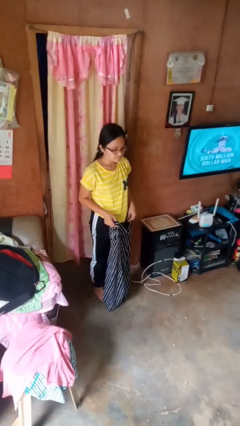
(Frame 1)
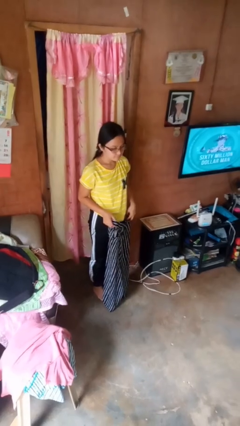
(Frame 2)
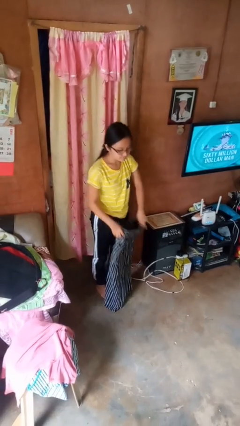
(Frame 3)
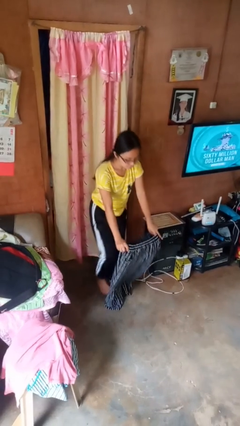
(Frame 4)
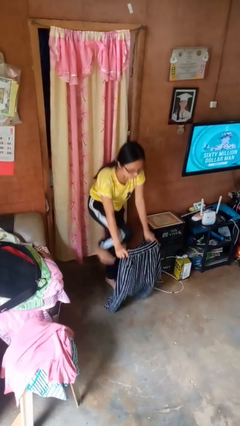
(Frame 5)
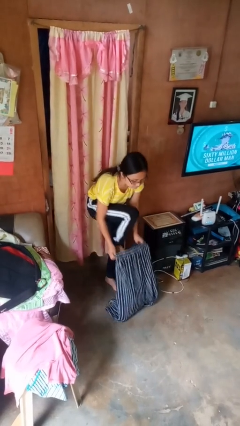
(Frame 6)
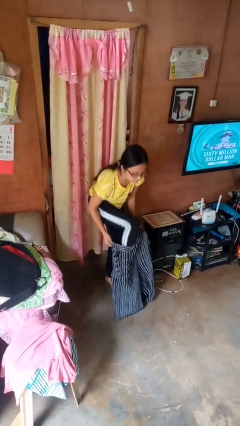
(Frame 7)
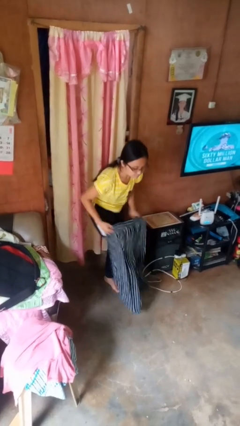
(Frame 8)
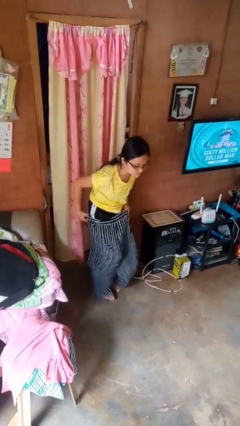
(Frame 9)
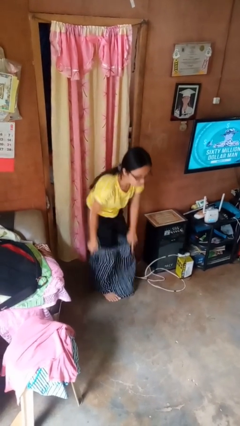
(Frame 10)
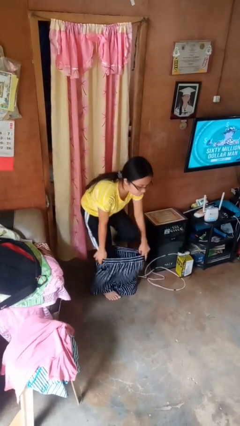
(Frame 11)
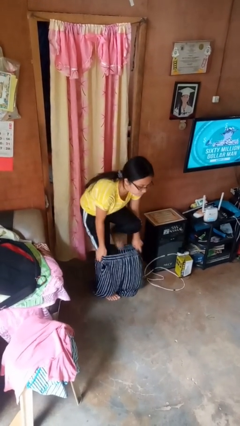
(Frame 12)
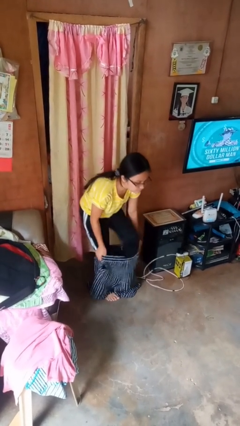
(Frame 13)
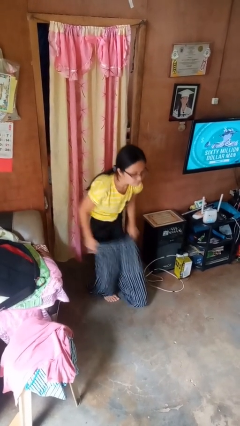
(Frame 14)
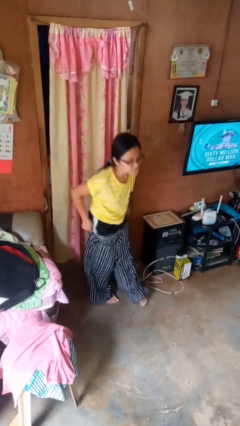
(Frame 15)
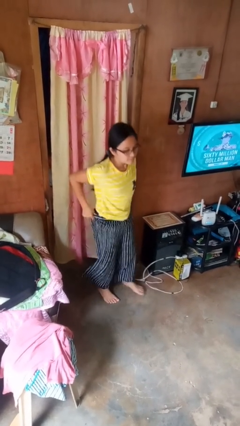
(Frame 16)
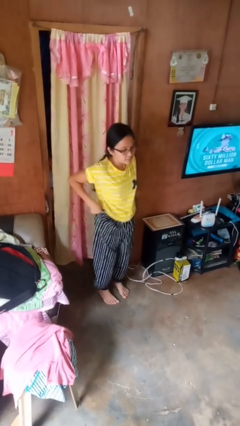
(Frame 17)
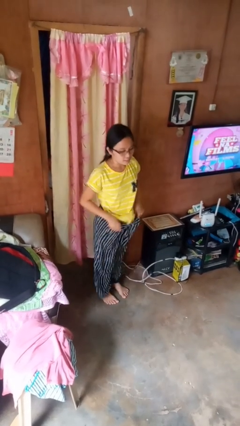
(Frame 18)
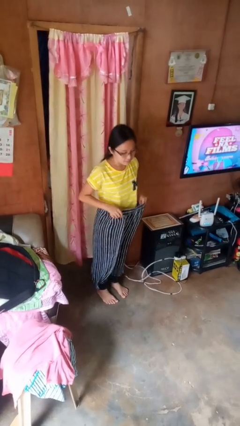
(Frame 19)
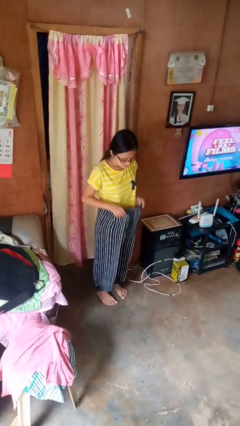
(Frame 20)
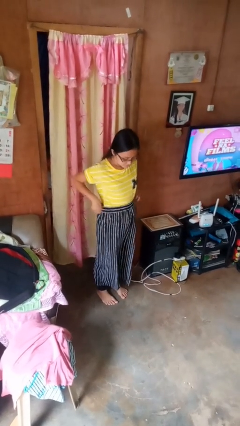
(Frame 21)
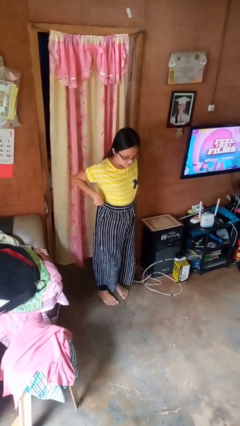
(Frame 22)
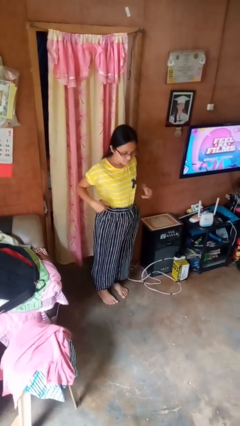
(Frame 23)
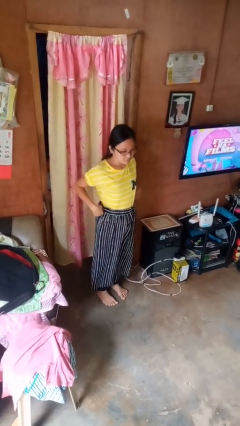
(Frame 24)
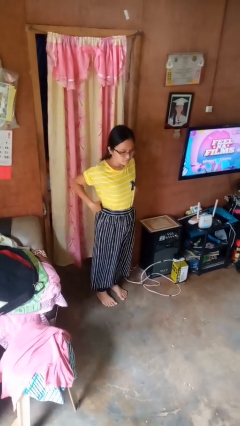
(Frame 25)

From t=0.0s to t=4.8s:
person puts on pants

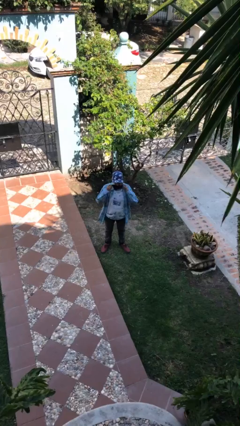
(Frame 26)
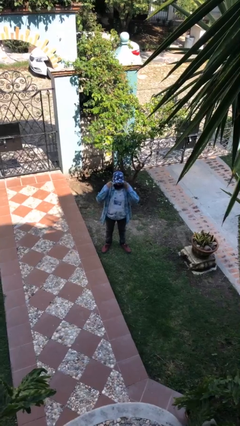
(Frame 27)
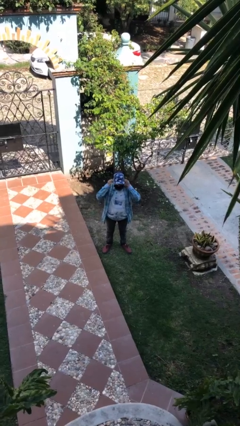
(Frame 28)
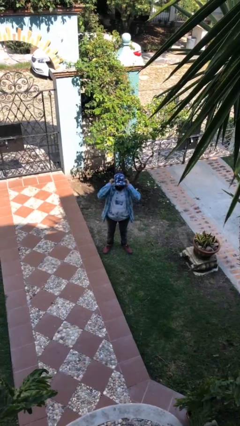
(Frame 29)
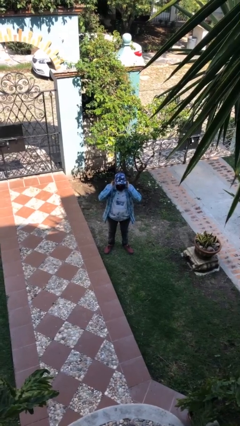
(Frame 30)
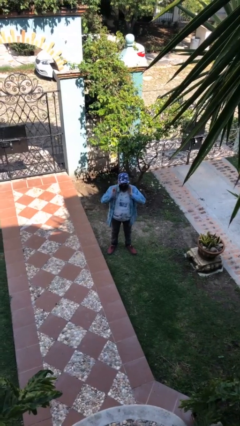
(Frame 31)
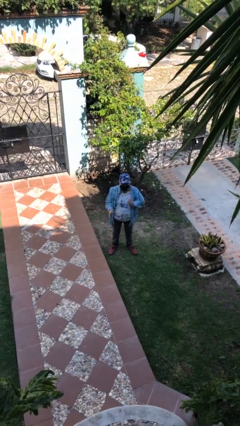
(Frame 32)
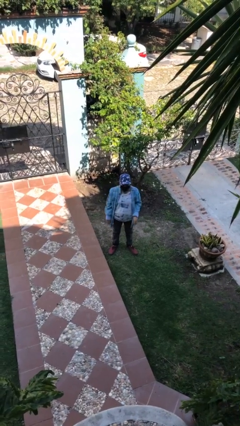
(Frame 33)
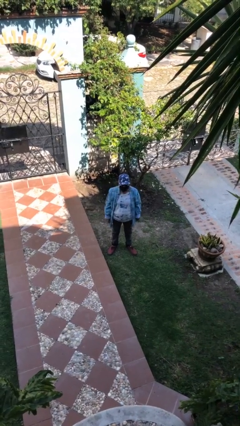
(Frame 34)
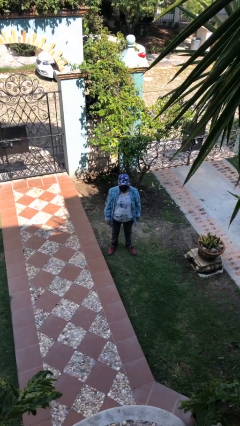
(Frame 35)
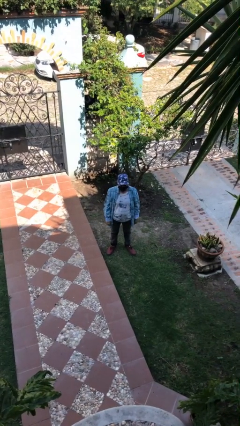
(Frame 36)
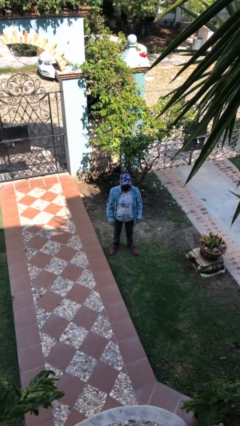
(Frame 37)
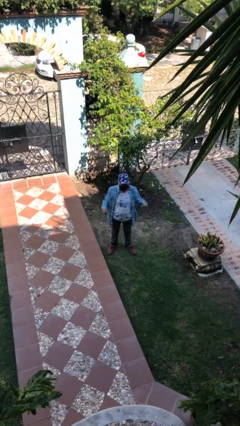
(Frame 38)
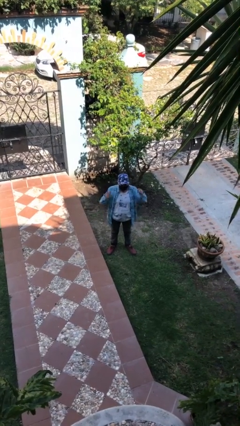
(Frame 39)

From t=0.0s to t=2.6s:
person puts on facemask

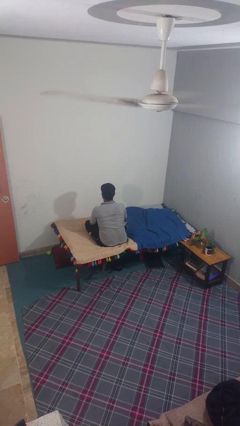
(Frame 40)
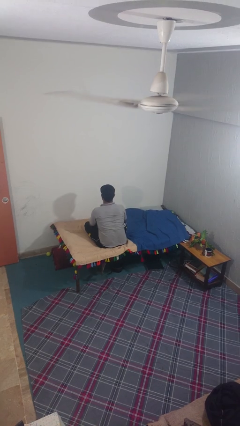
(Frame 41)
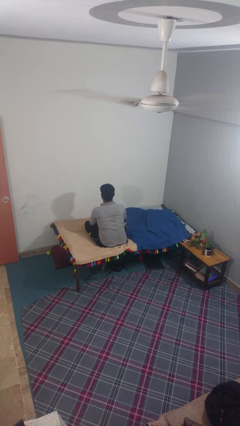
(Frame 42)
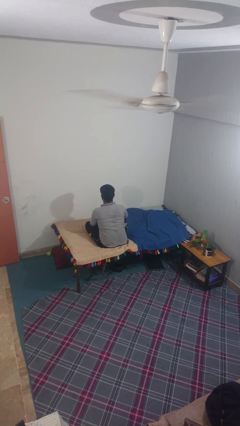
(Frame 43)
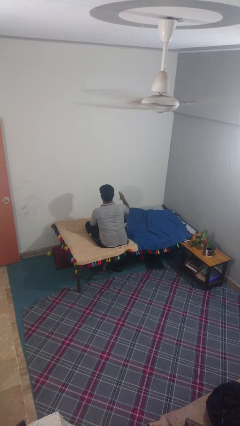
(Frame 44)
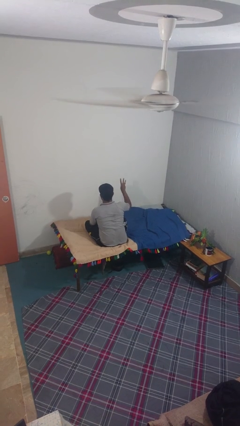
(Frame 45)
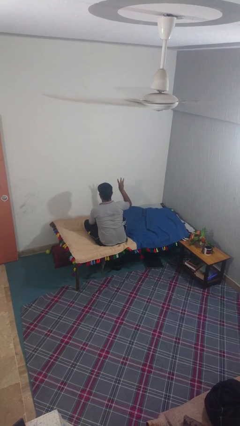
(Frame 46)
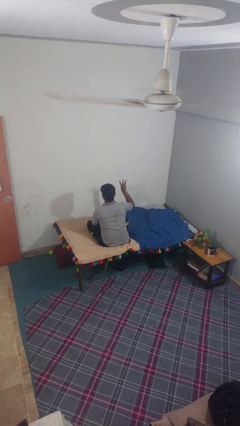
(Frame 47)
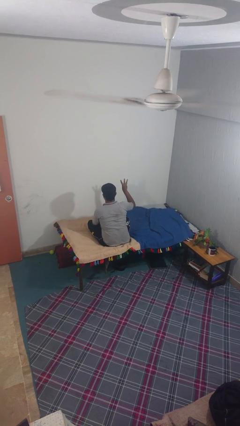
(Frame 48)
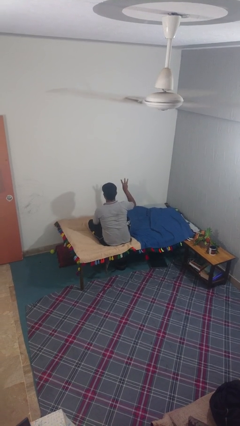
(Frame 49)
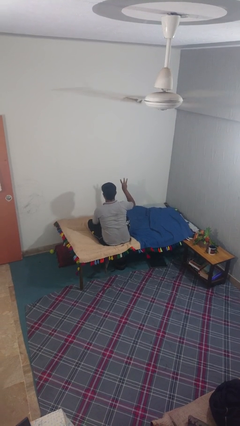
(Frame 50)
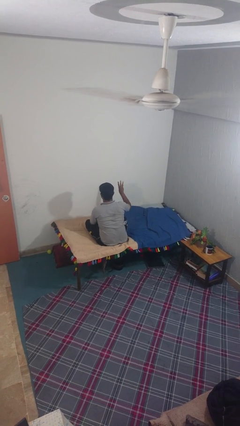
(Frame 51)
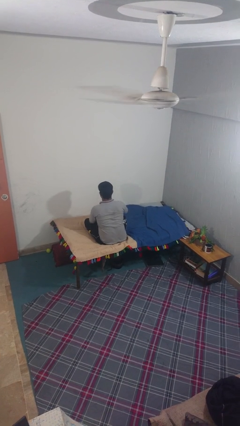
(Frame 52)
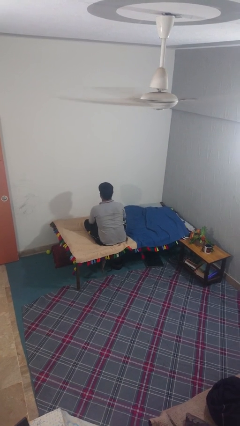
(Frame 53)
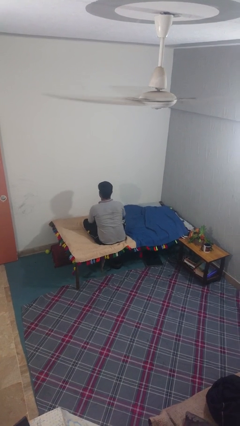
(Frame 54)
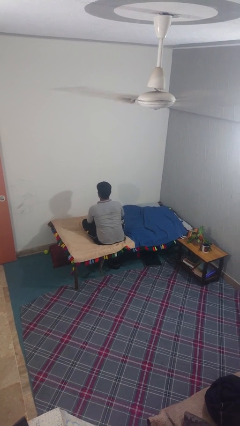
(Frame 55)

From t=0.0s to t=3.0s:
person gestures number three

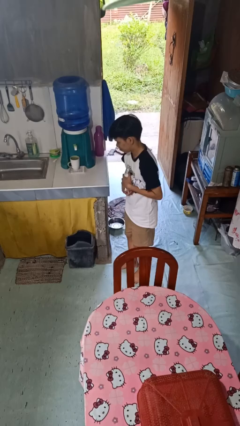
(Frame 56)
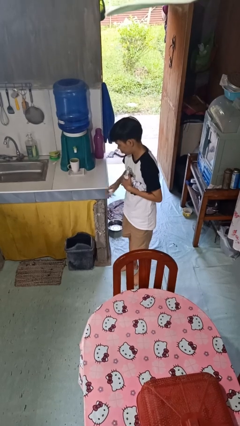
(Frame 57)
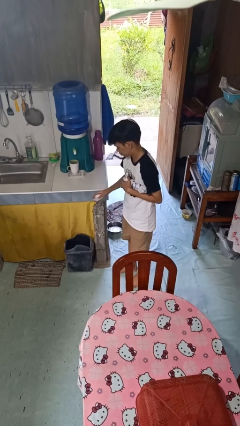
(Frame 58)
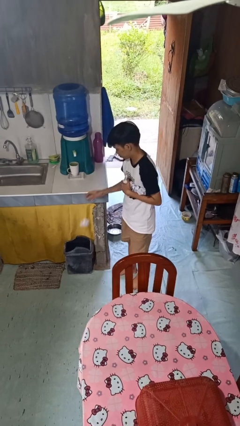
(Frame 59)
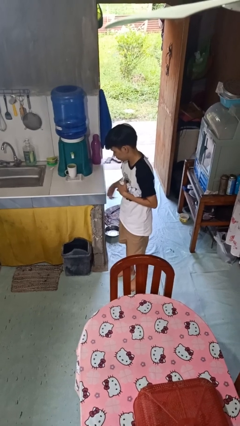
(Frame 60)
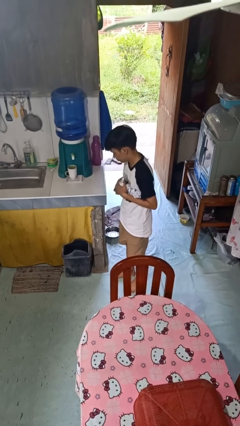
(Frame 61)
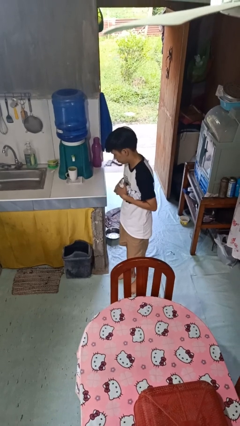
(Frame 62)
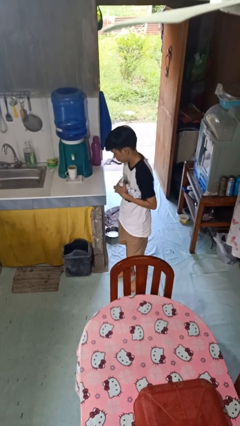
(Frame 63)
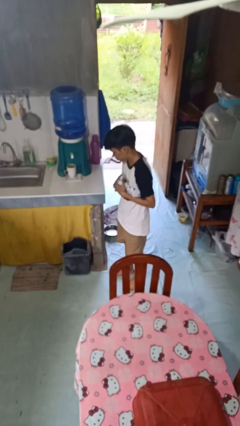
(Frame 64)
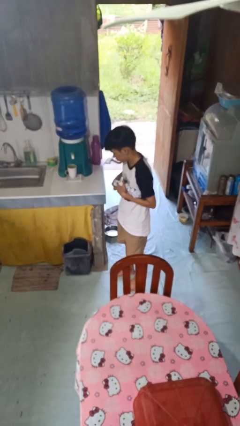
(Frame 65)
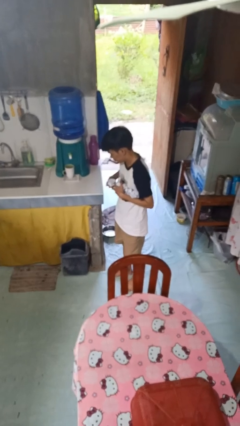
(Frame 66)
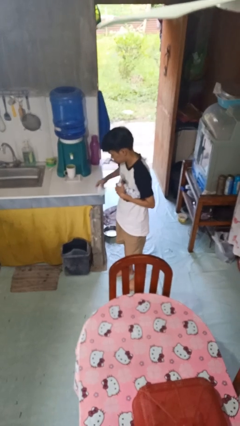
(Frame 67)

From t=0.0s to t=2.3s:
person discards trash

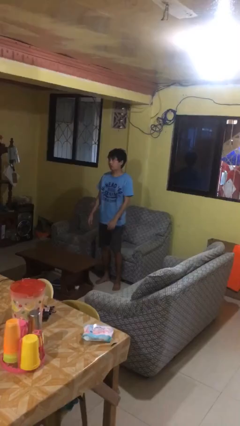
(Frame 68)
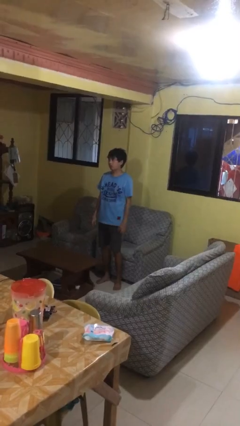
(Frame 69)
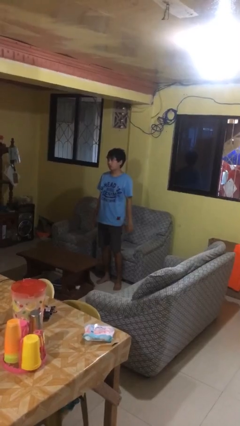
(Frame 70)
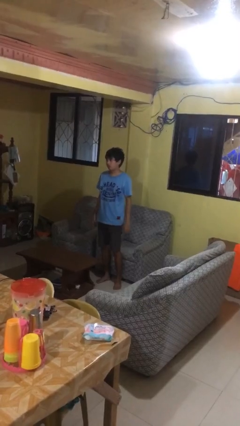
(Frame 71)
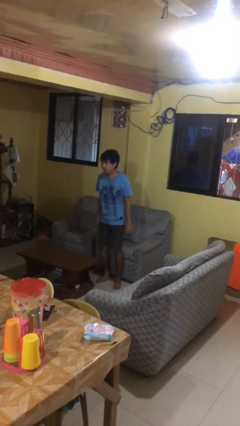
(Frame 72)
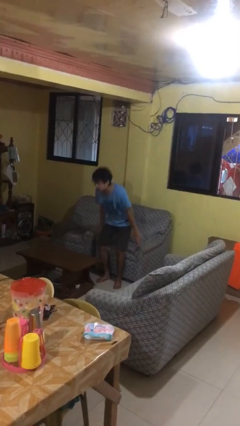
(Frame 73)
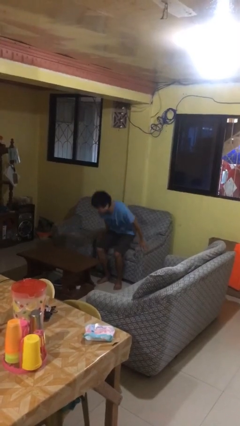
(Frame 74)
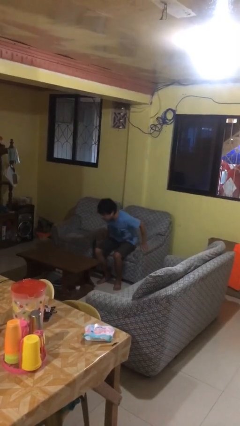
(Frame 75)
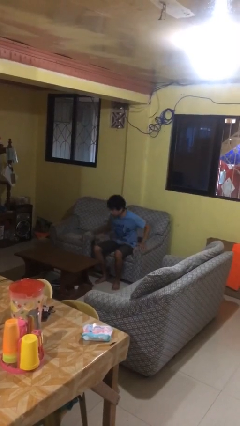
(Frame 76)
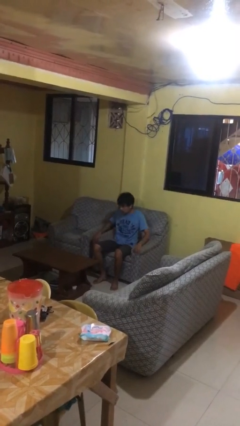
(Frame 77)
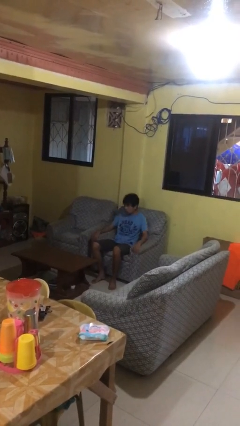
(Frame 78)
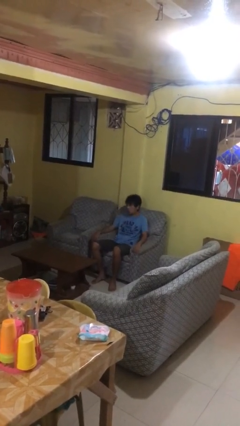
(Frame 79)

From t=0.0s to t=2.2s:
person lies down on couch

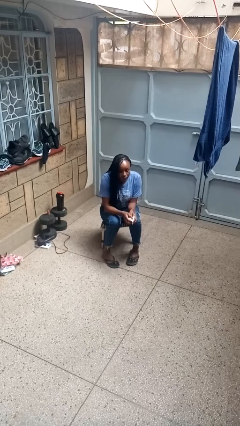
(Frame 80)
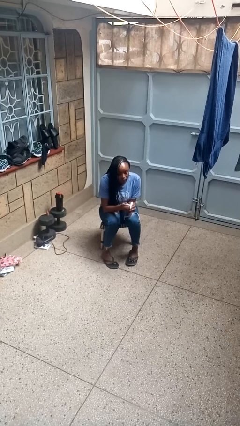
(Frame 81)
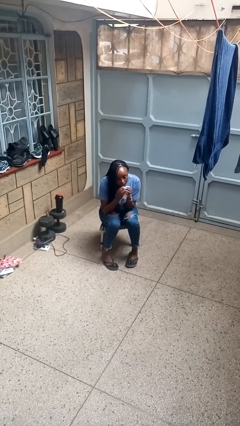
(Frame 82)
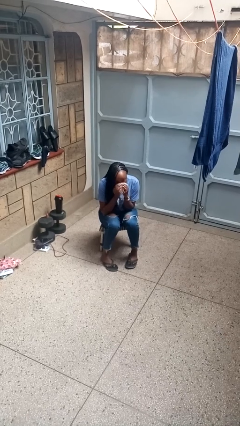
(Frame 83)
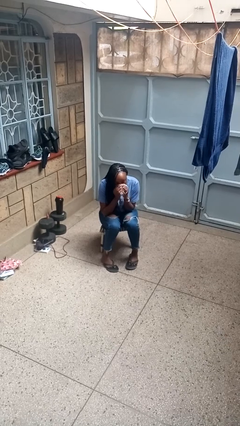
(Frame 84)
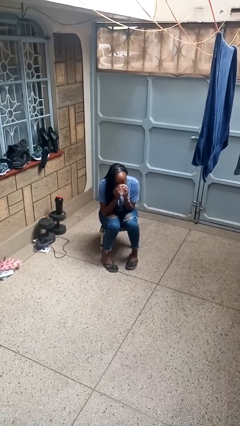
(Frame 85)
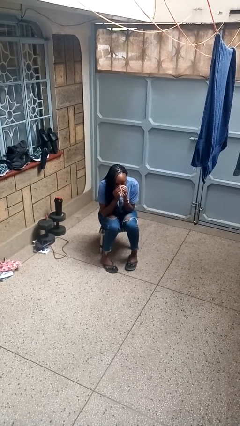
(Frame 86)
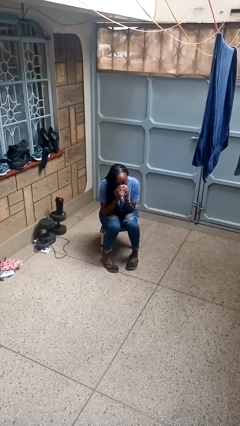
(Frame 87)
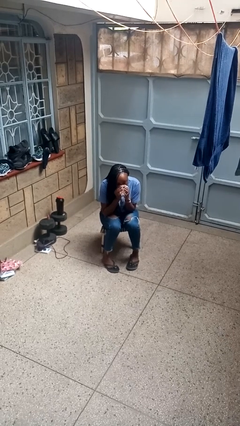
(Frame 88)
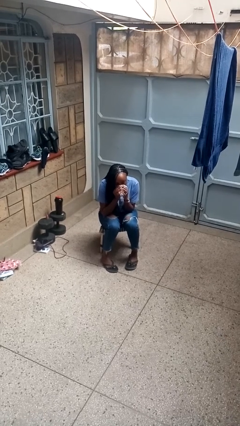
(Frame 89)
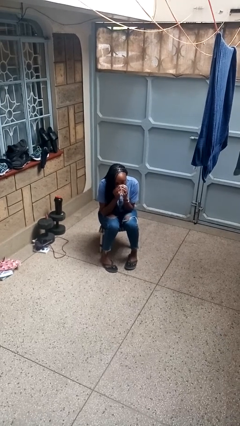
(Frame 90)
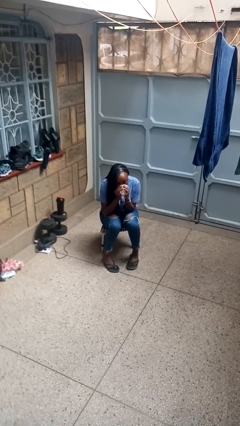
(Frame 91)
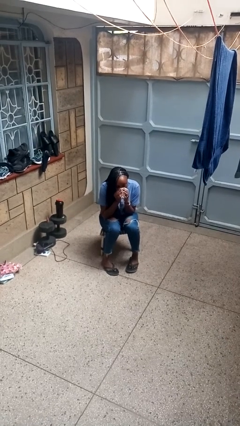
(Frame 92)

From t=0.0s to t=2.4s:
person blows nose
